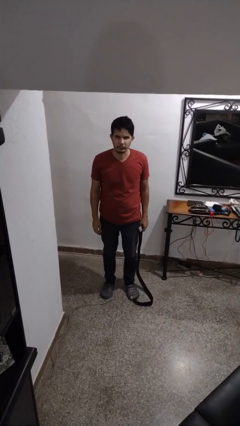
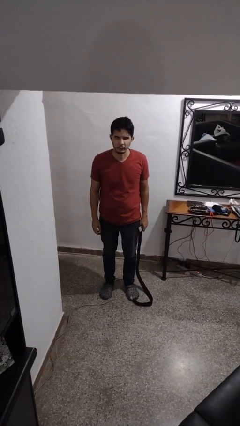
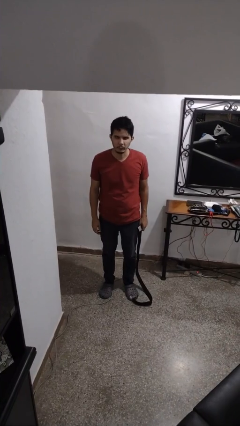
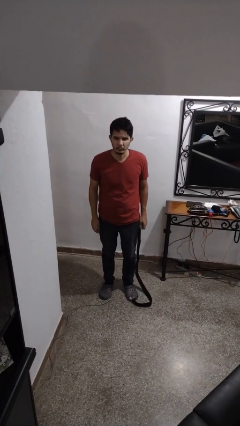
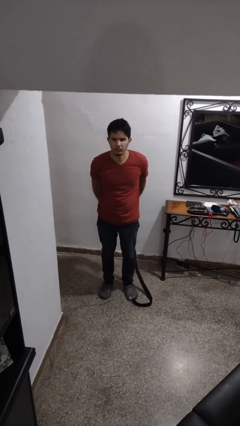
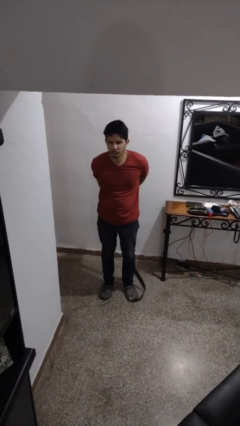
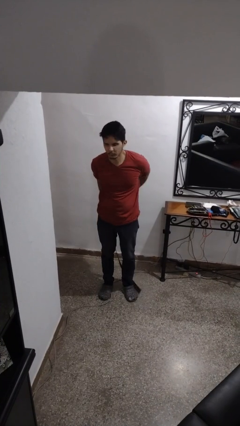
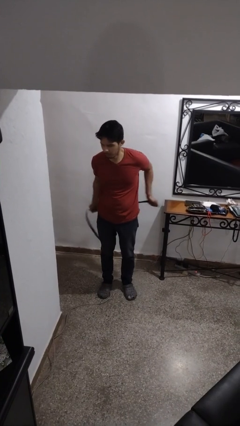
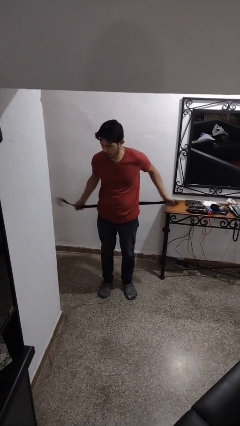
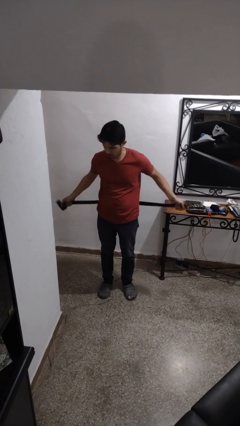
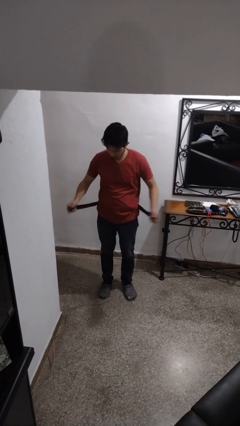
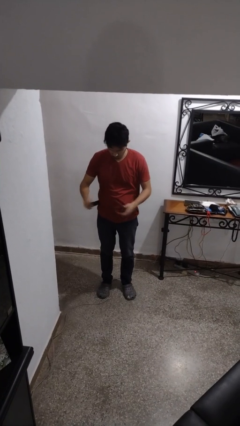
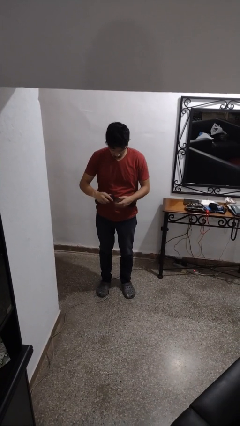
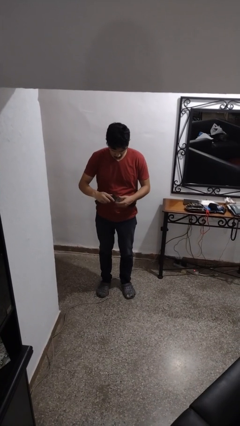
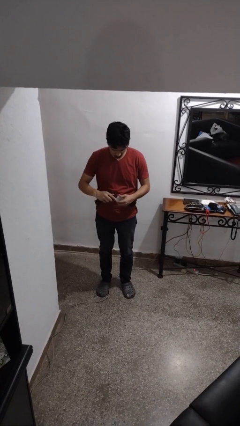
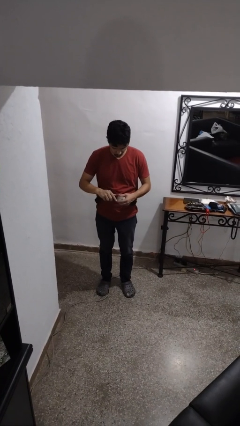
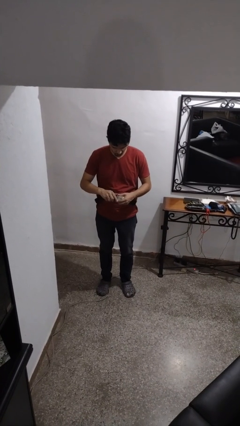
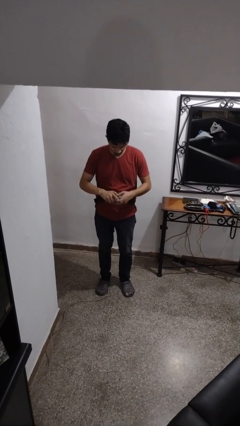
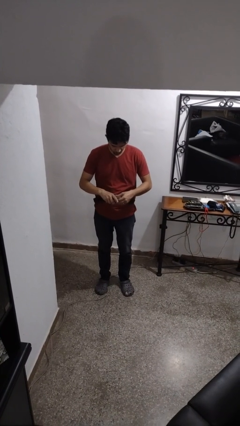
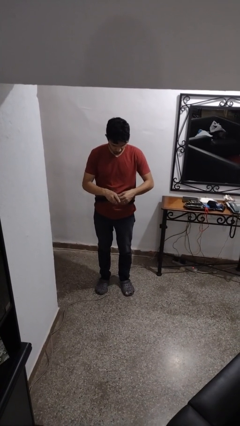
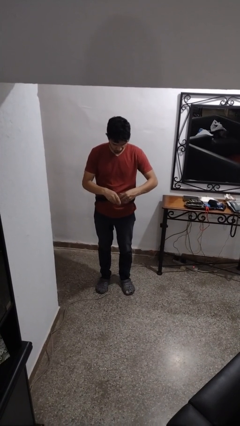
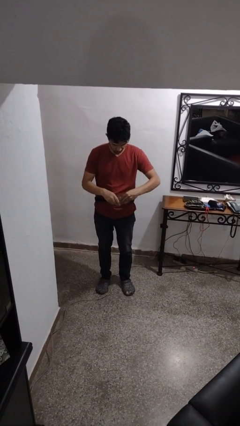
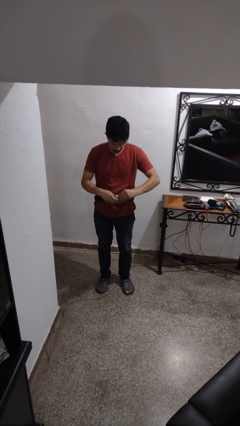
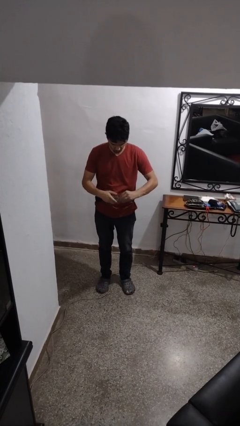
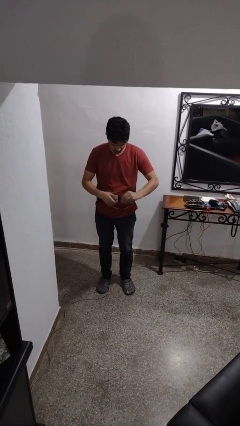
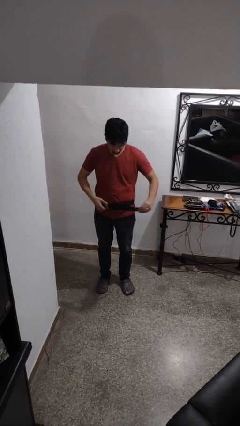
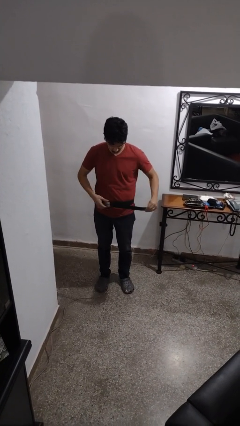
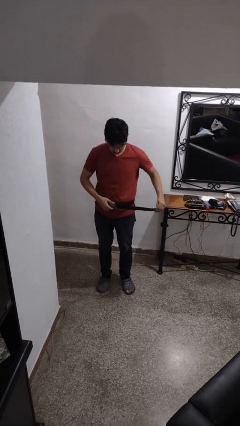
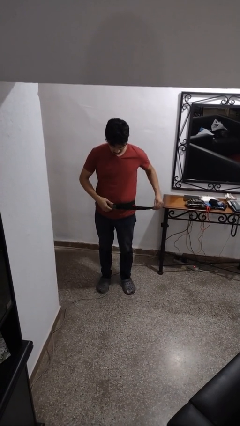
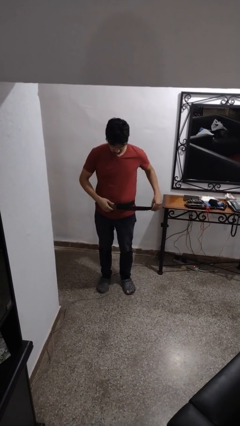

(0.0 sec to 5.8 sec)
person puts on belt

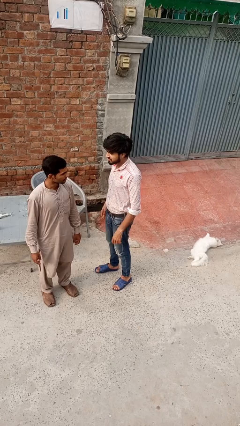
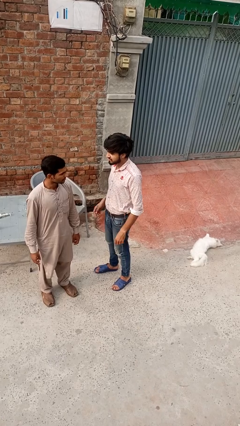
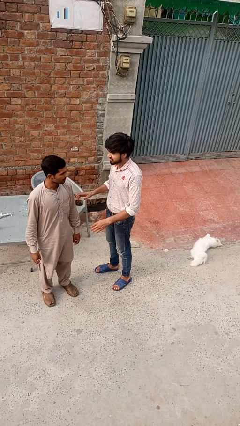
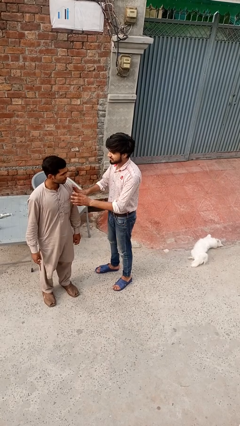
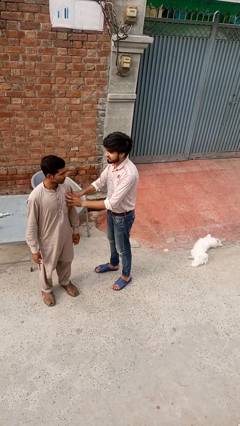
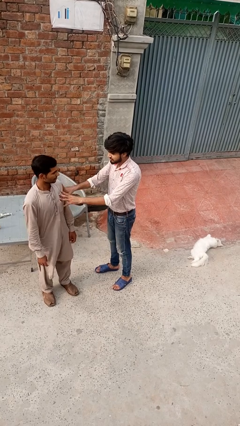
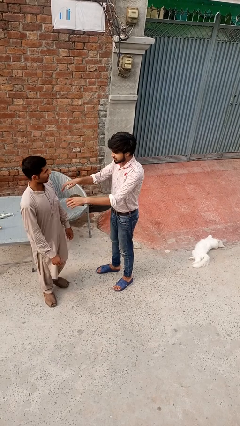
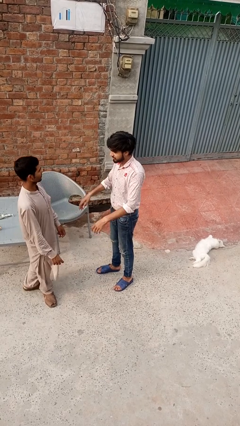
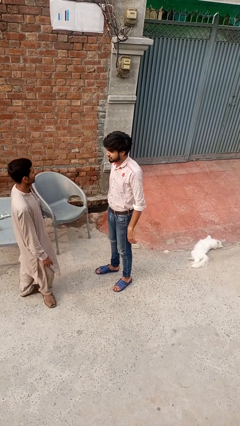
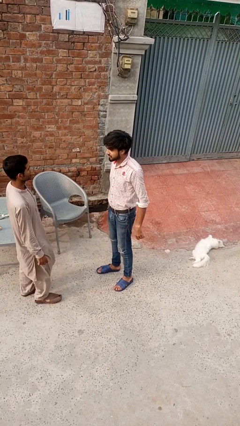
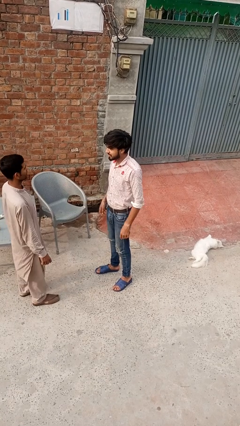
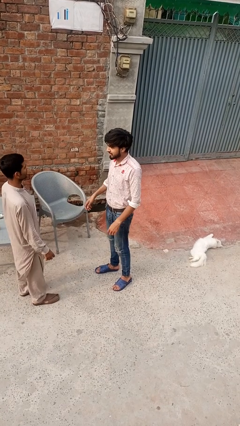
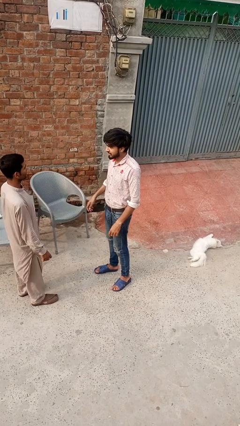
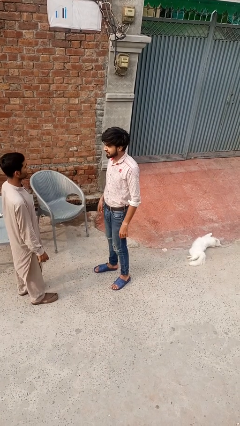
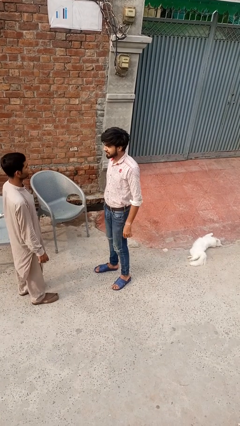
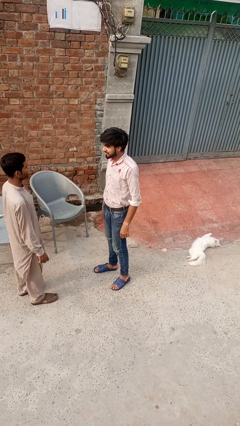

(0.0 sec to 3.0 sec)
person grabs person by forearm

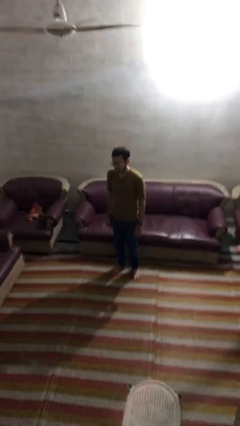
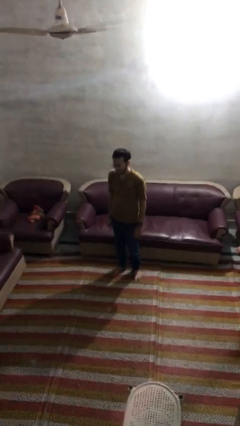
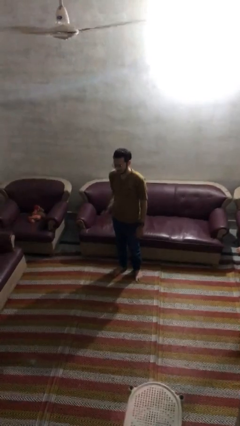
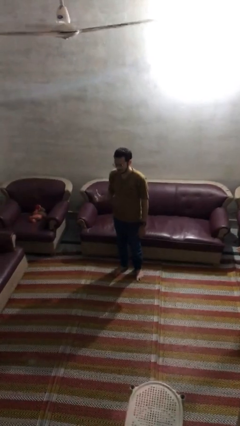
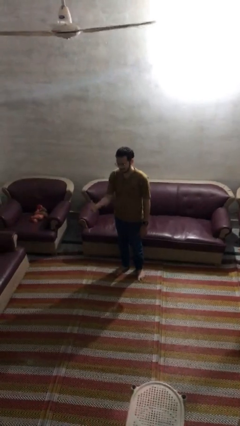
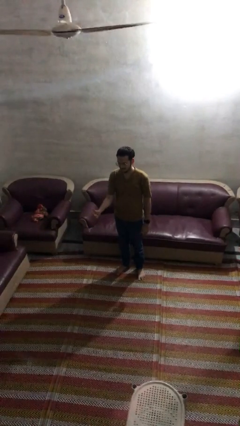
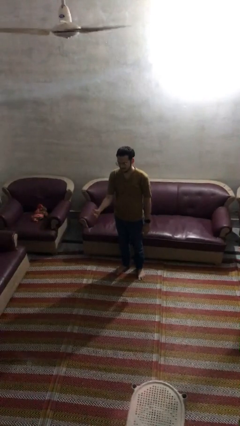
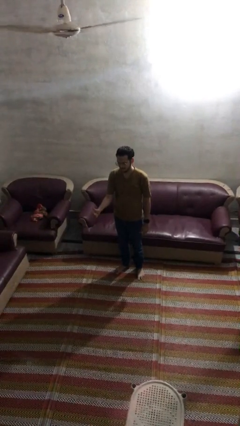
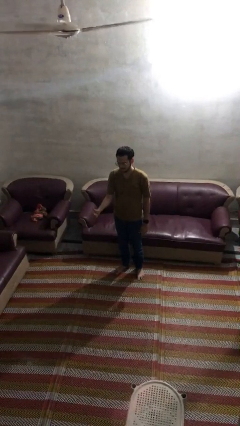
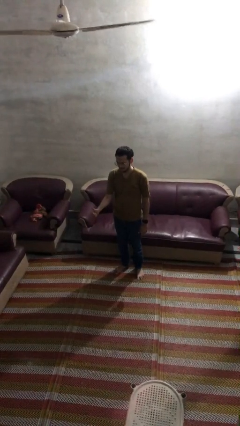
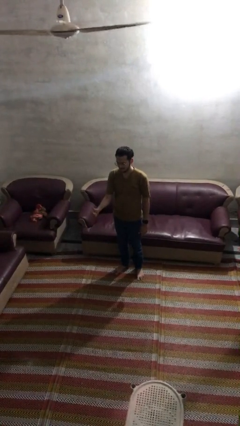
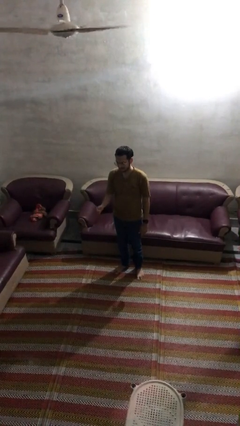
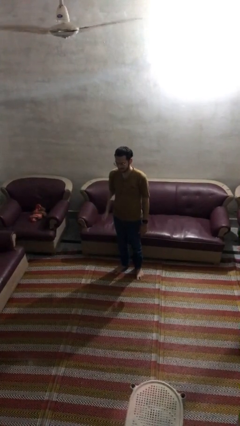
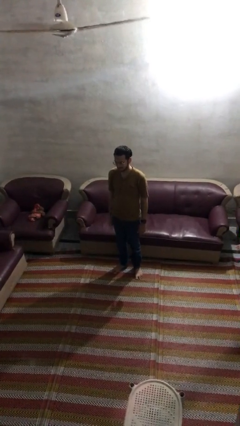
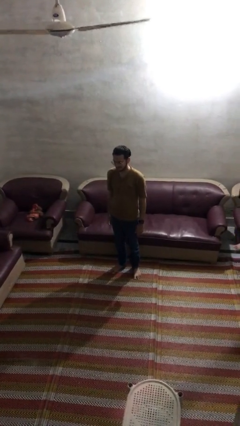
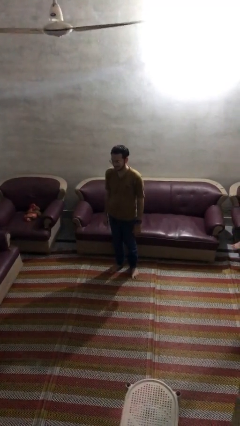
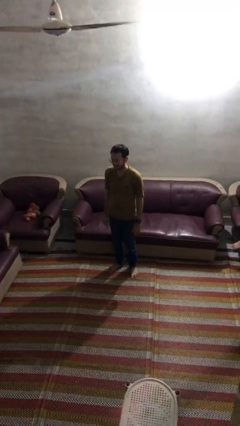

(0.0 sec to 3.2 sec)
person gestures thumbs up

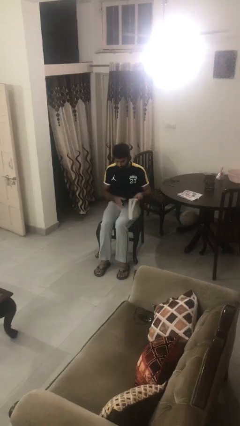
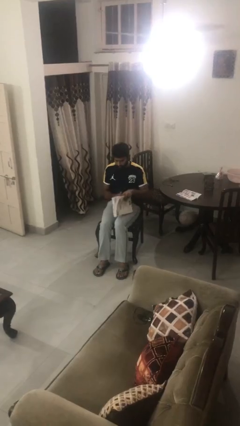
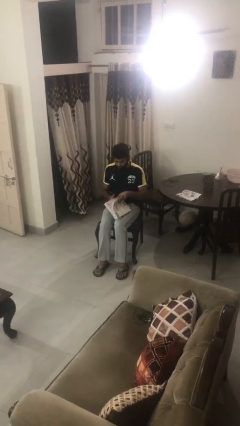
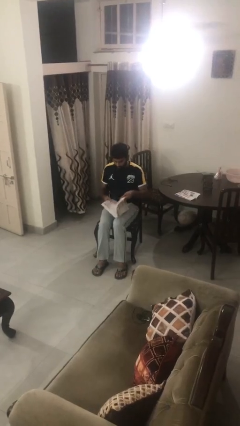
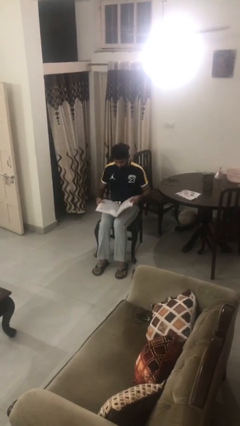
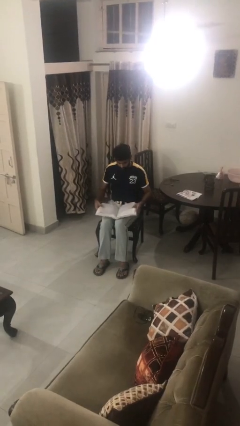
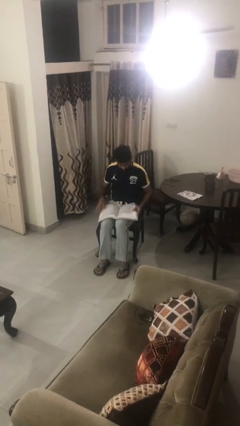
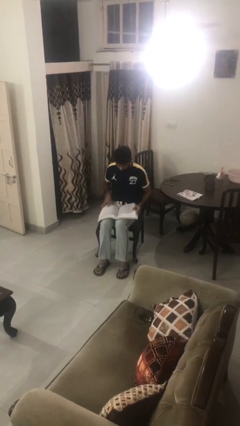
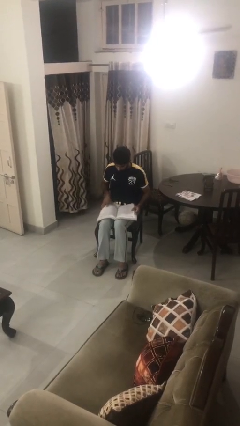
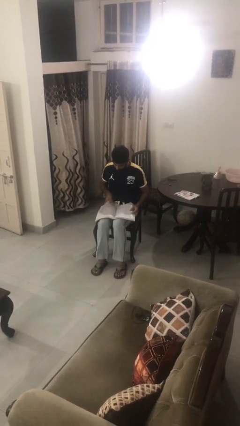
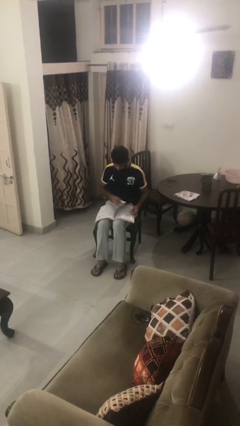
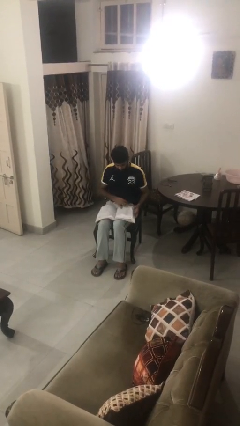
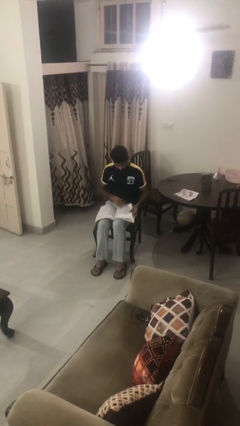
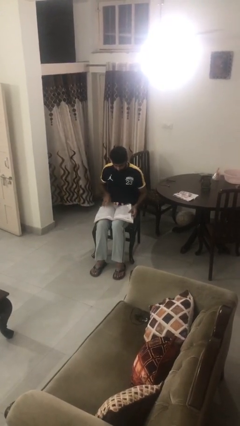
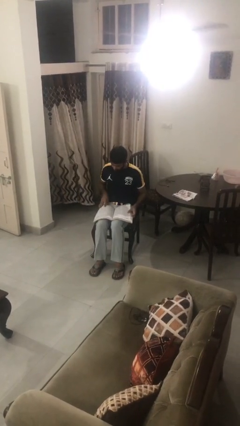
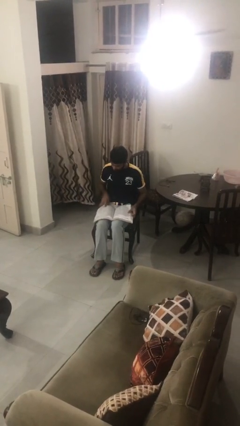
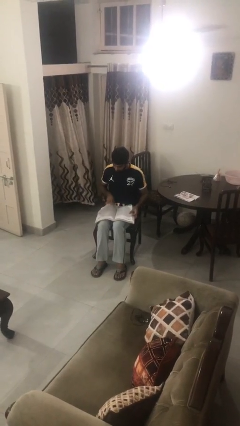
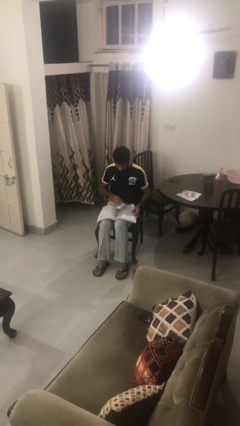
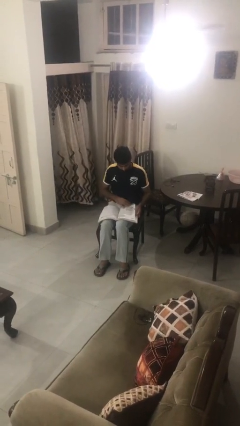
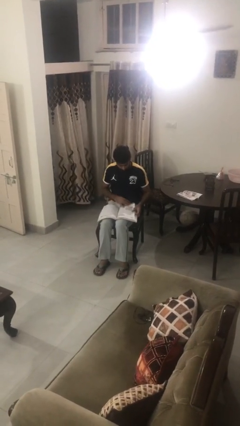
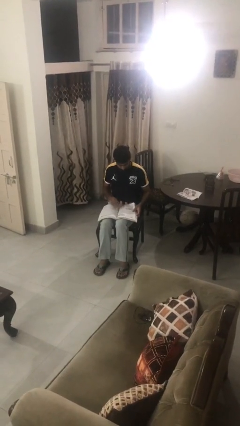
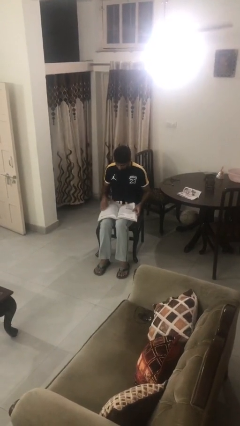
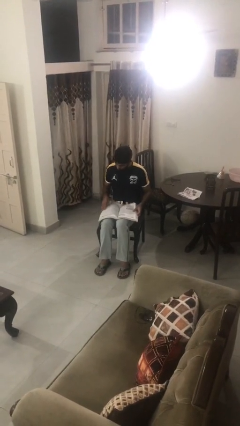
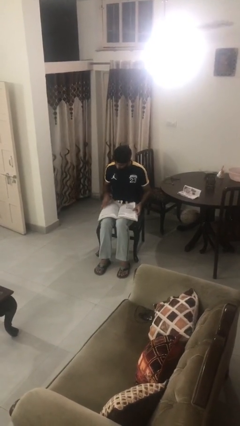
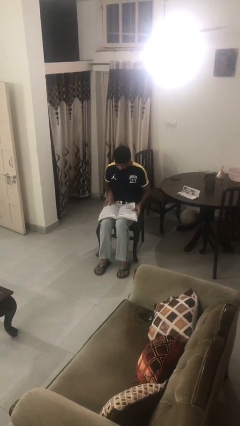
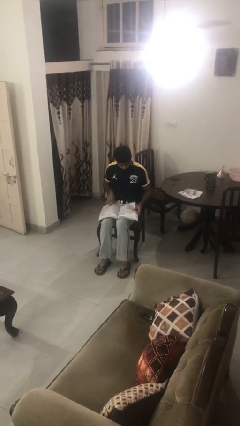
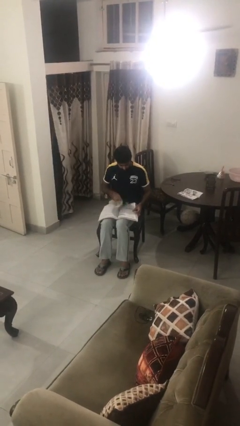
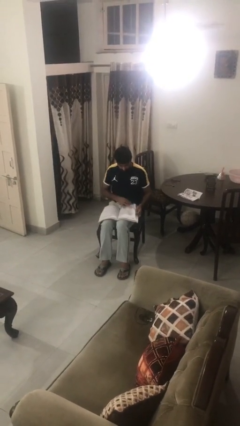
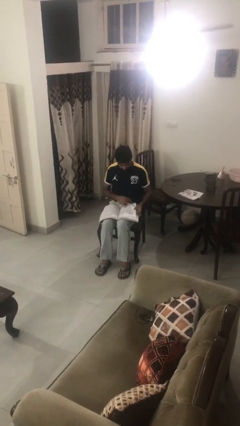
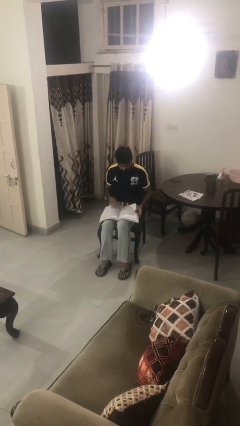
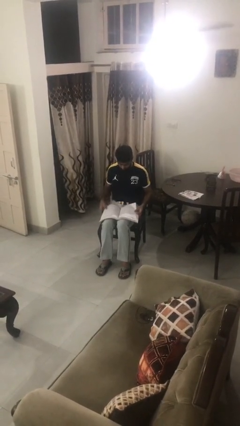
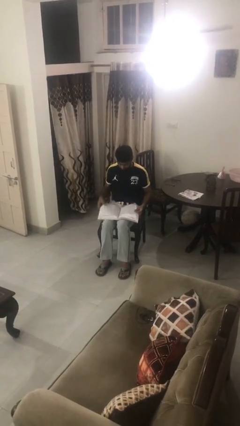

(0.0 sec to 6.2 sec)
person reads book
